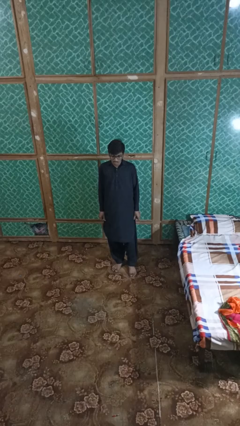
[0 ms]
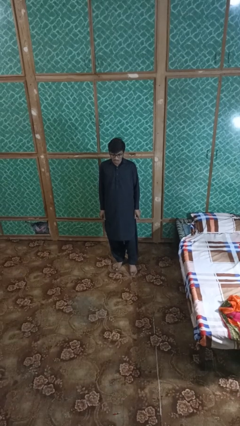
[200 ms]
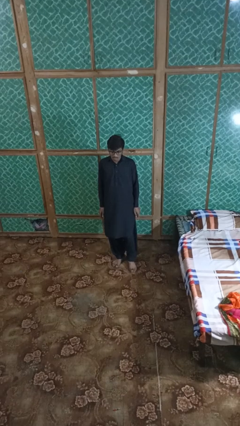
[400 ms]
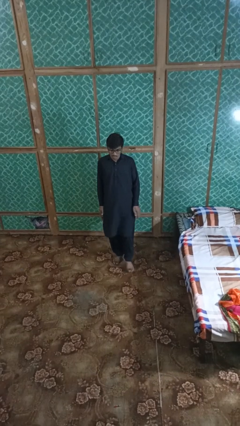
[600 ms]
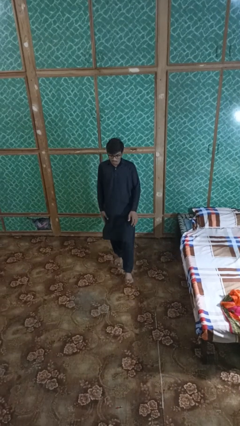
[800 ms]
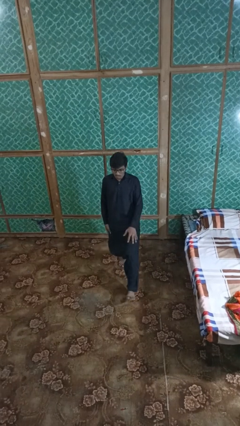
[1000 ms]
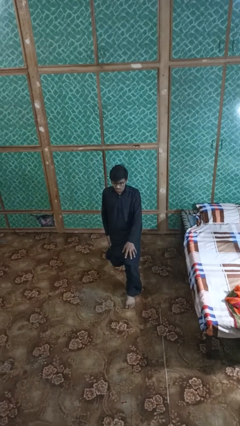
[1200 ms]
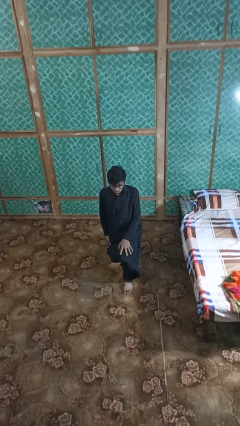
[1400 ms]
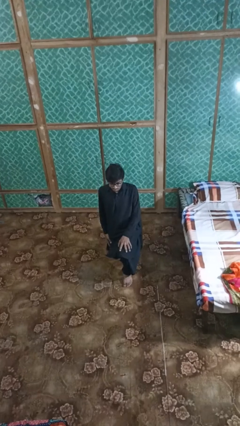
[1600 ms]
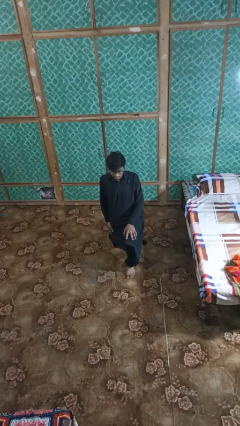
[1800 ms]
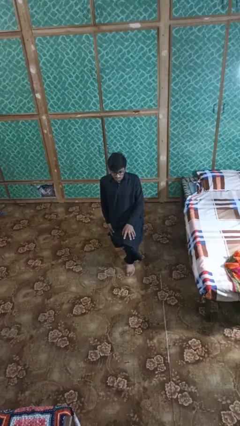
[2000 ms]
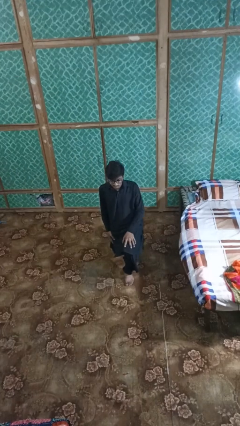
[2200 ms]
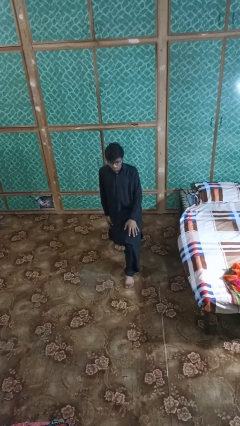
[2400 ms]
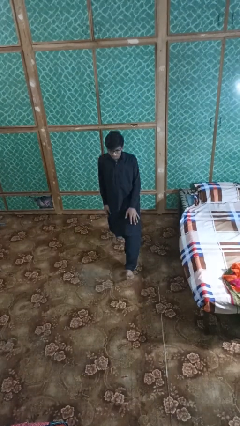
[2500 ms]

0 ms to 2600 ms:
person exercises with lunges

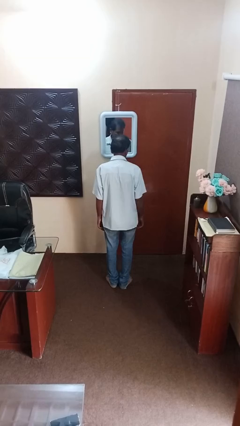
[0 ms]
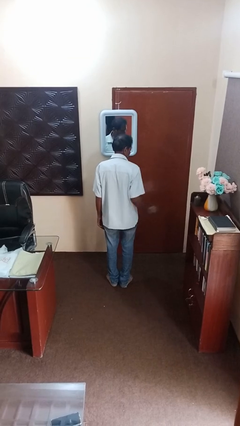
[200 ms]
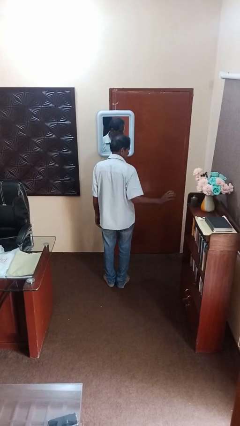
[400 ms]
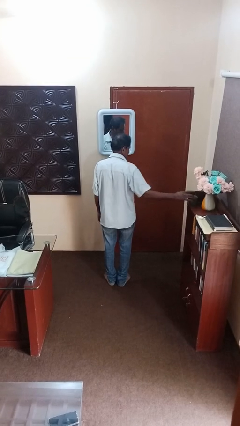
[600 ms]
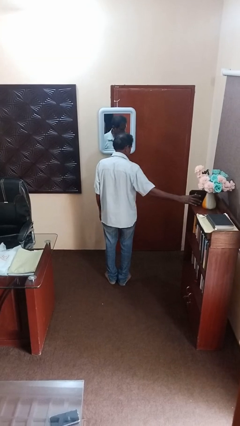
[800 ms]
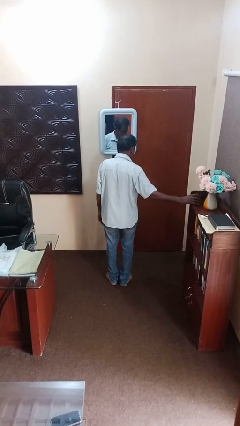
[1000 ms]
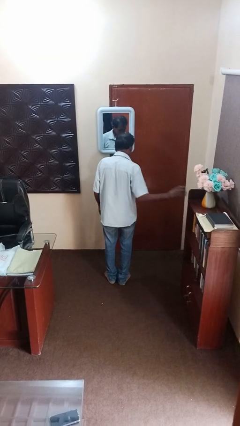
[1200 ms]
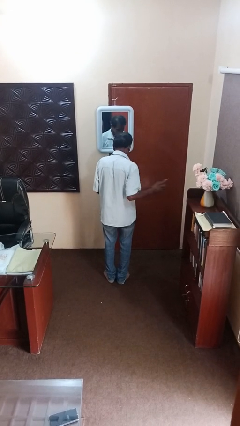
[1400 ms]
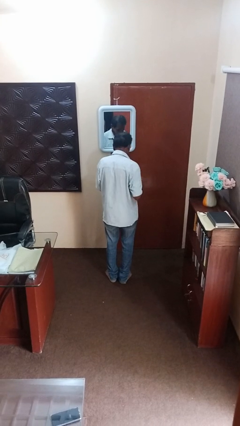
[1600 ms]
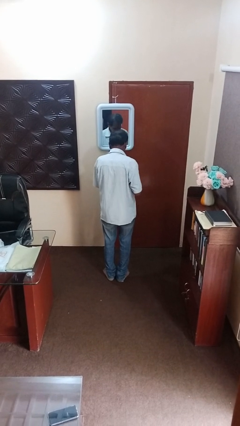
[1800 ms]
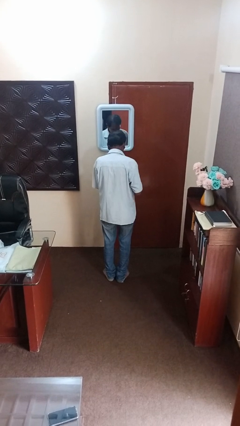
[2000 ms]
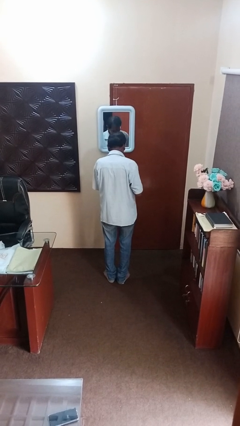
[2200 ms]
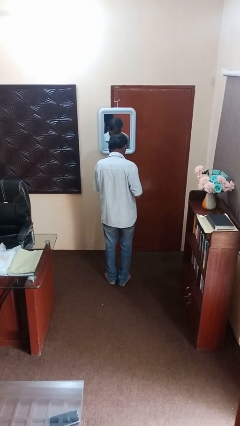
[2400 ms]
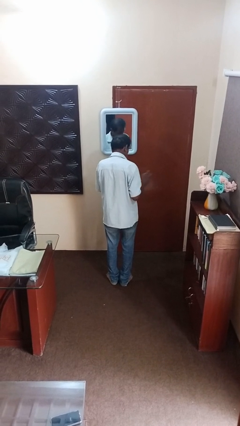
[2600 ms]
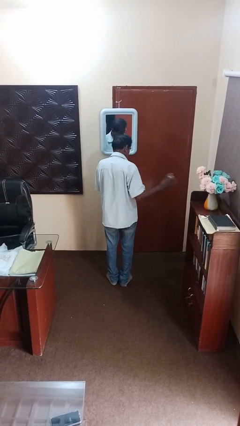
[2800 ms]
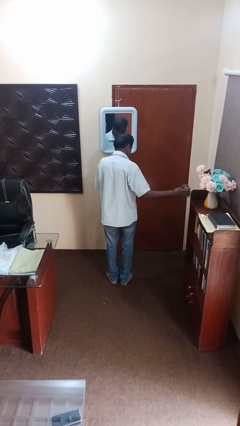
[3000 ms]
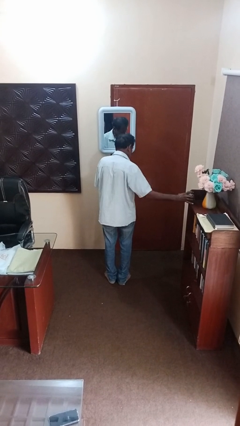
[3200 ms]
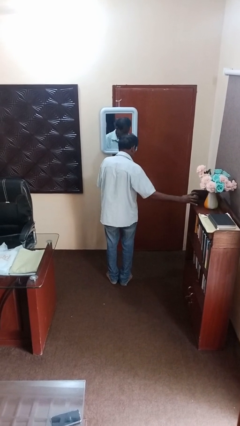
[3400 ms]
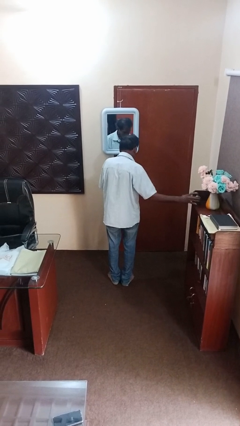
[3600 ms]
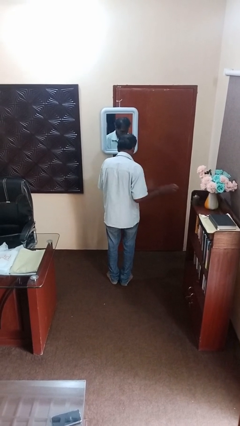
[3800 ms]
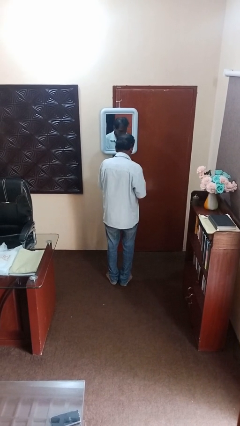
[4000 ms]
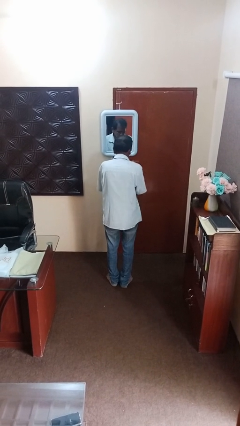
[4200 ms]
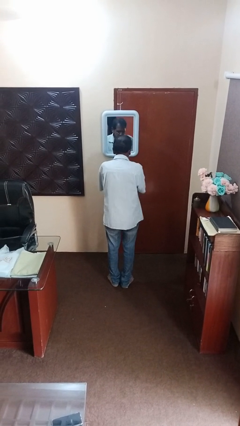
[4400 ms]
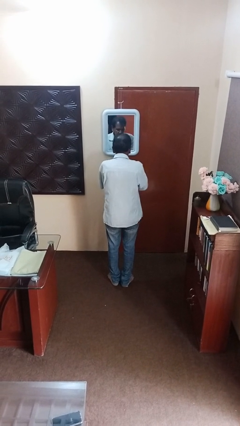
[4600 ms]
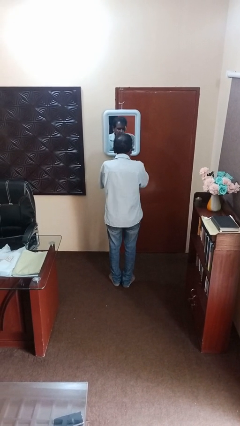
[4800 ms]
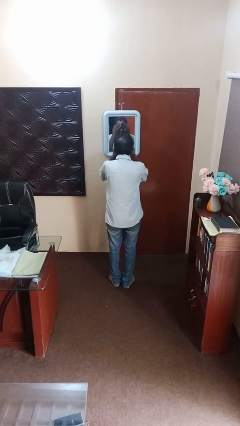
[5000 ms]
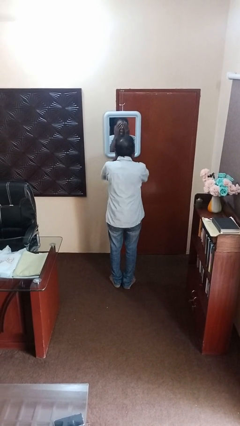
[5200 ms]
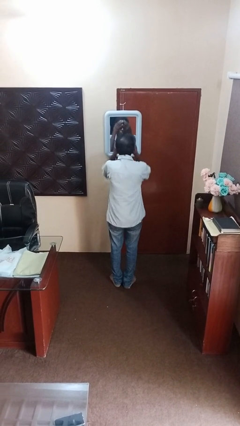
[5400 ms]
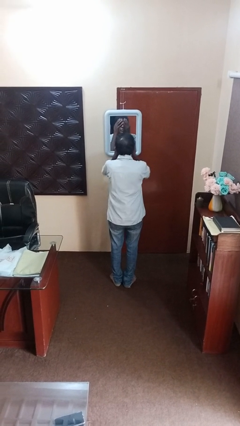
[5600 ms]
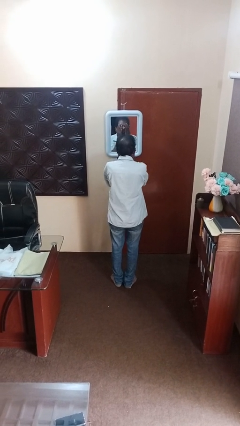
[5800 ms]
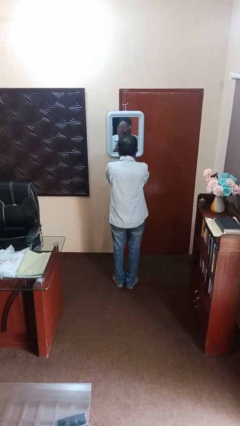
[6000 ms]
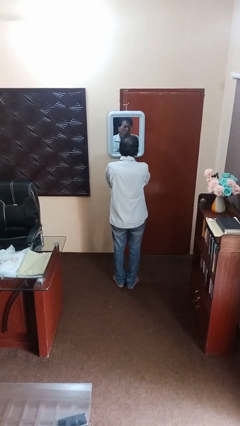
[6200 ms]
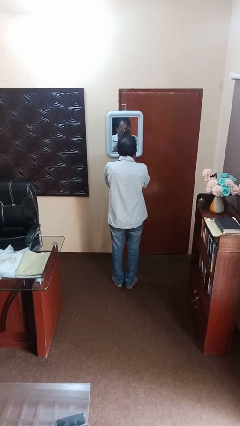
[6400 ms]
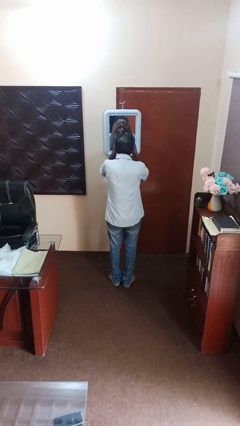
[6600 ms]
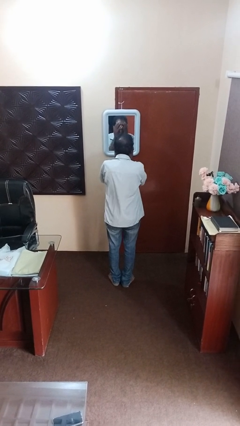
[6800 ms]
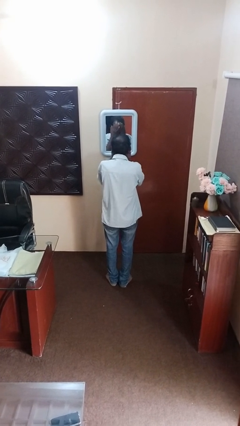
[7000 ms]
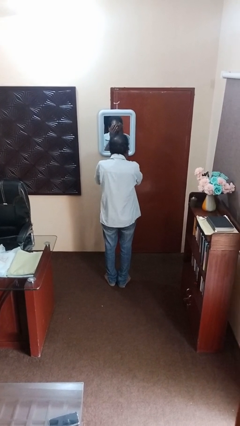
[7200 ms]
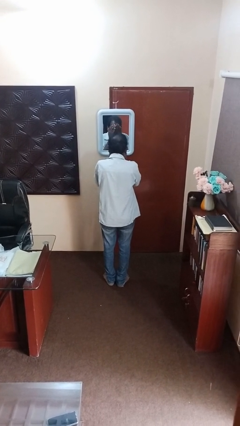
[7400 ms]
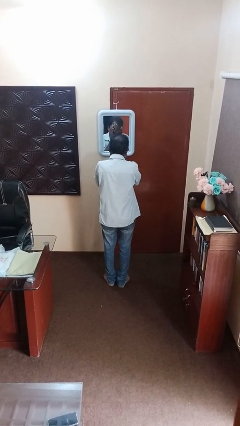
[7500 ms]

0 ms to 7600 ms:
person applies foundation makeup

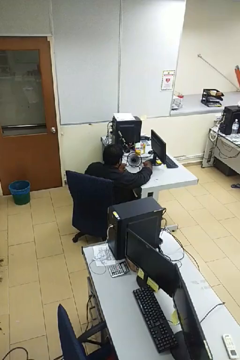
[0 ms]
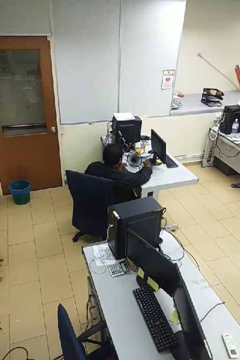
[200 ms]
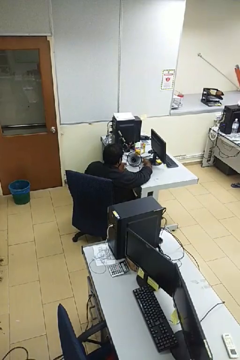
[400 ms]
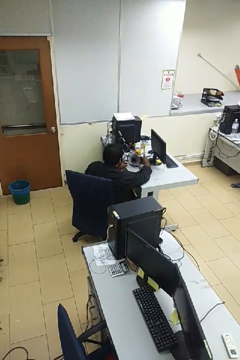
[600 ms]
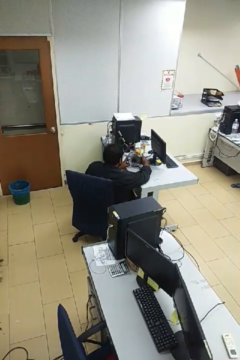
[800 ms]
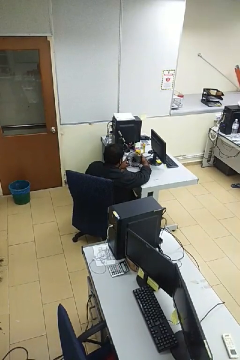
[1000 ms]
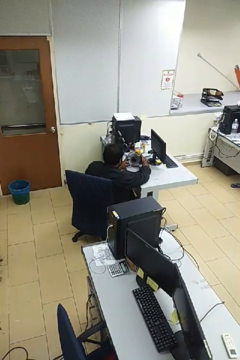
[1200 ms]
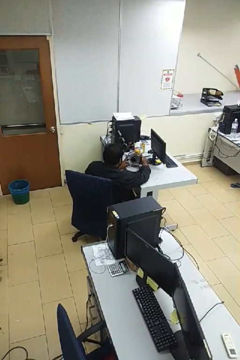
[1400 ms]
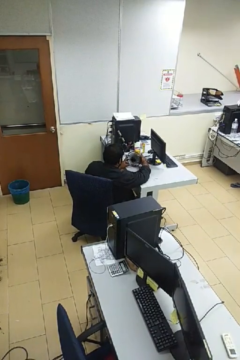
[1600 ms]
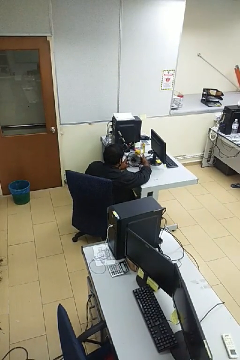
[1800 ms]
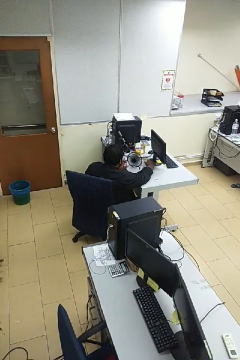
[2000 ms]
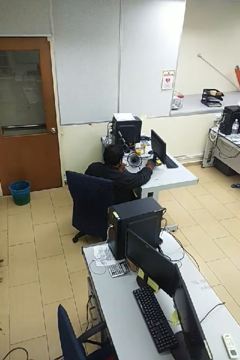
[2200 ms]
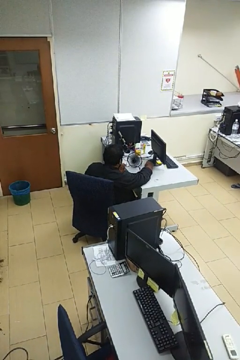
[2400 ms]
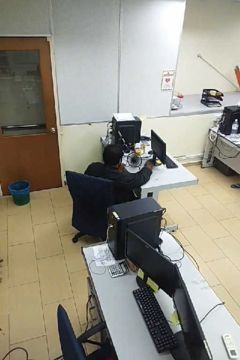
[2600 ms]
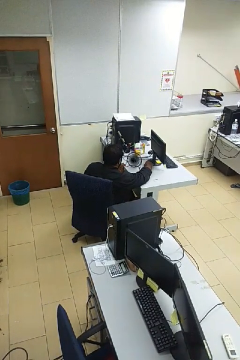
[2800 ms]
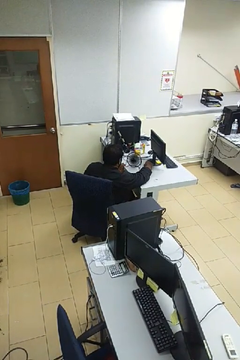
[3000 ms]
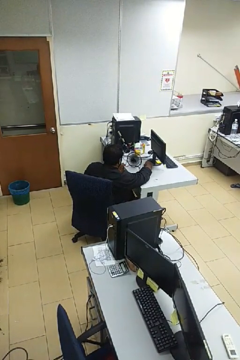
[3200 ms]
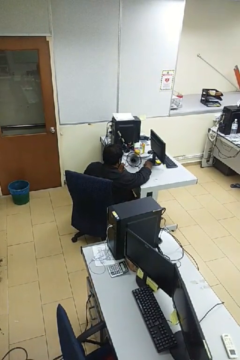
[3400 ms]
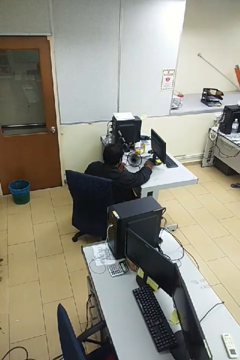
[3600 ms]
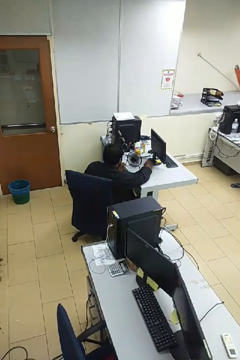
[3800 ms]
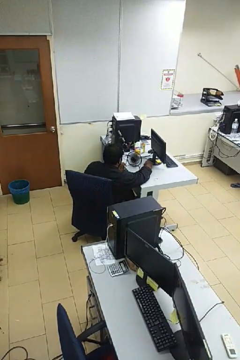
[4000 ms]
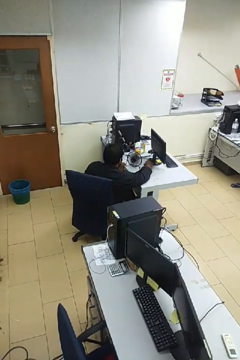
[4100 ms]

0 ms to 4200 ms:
person turns off fan

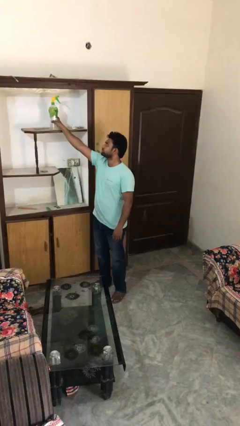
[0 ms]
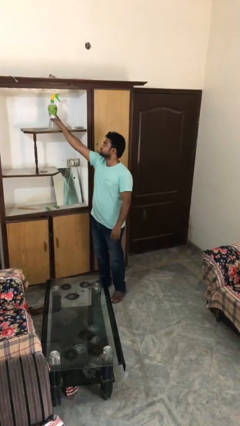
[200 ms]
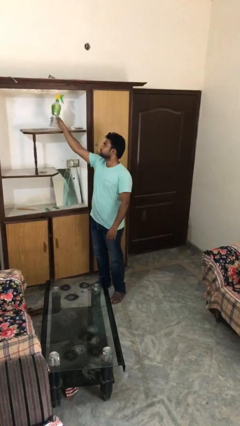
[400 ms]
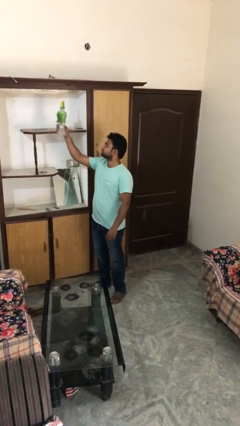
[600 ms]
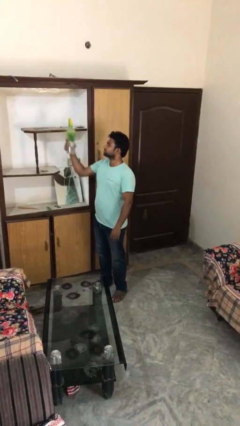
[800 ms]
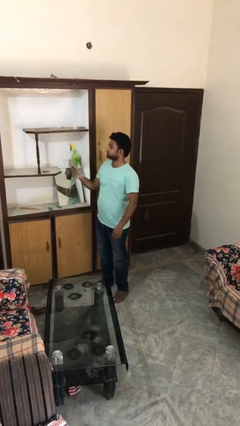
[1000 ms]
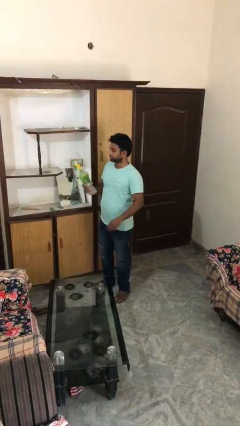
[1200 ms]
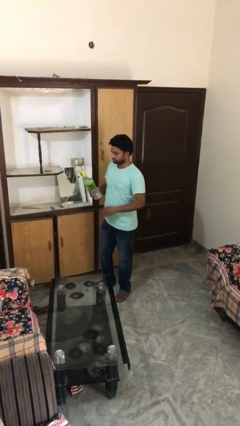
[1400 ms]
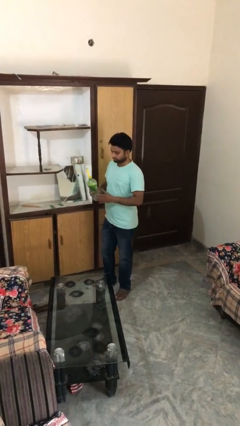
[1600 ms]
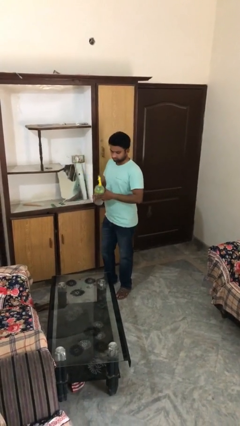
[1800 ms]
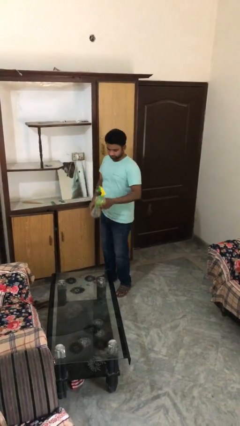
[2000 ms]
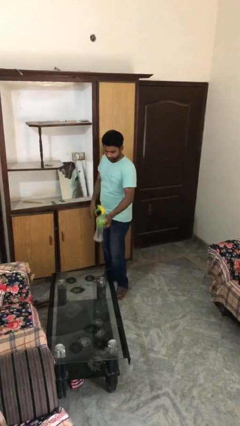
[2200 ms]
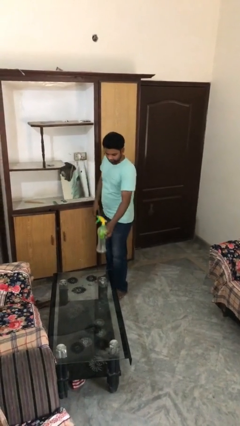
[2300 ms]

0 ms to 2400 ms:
person picks up object from shelf

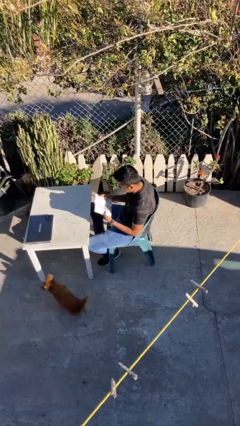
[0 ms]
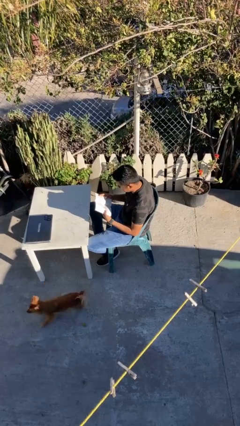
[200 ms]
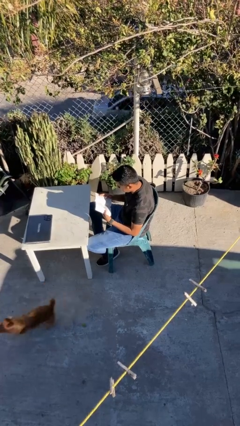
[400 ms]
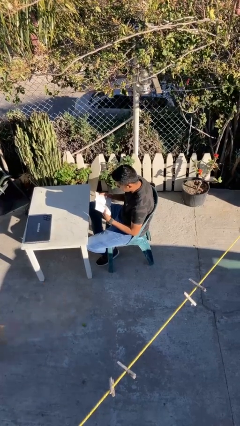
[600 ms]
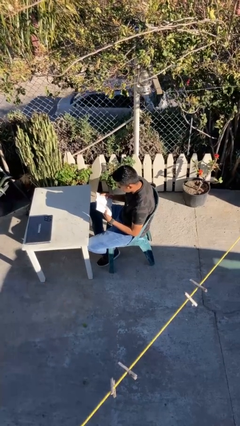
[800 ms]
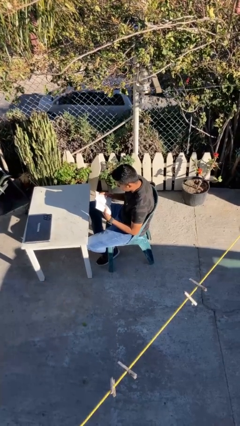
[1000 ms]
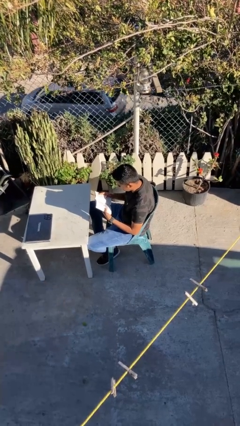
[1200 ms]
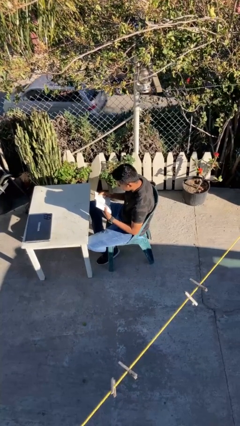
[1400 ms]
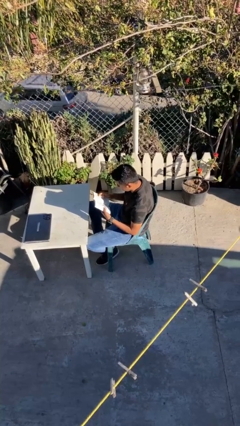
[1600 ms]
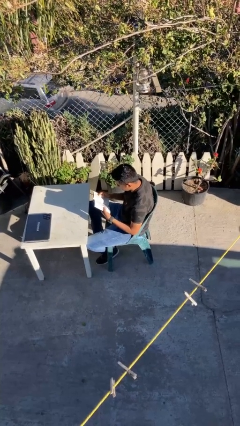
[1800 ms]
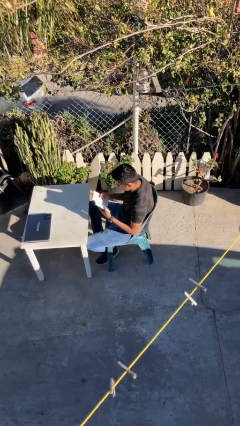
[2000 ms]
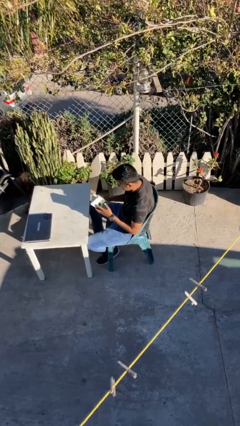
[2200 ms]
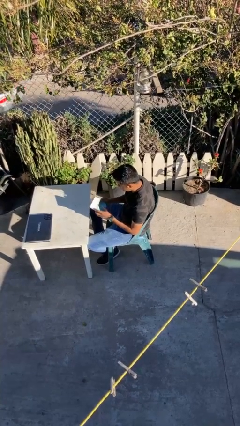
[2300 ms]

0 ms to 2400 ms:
person reads document
